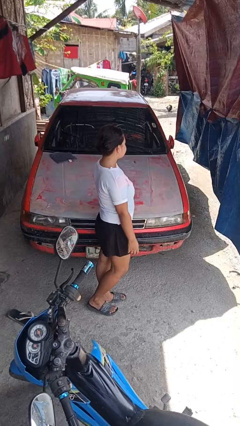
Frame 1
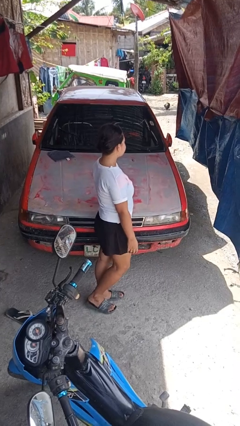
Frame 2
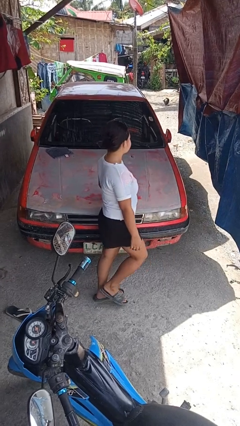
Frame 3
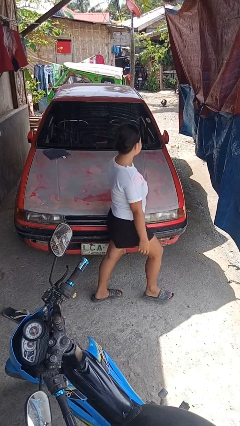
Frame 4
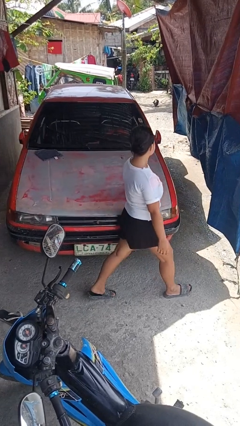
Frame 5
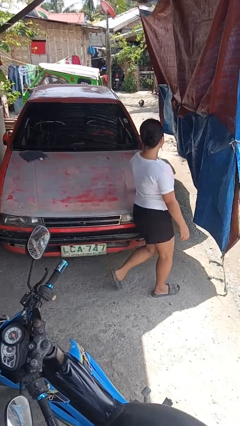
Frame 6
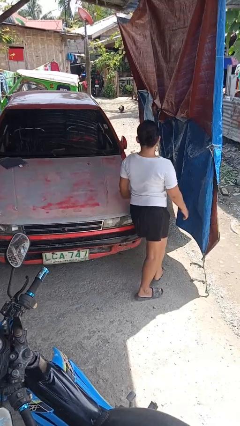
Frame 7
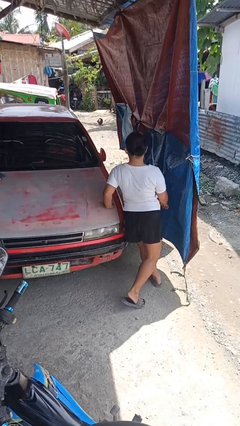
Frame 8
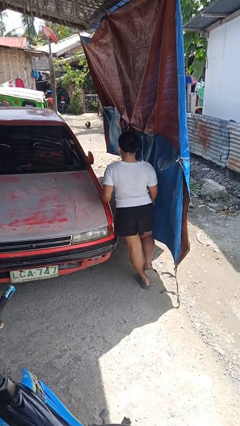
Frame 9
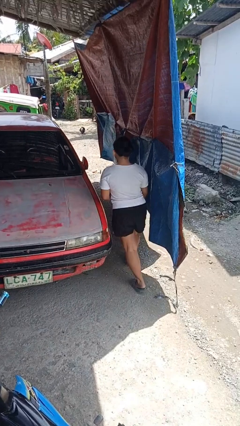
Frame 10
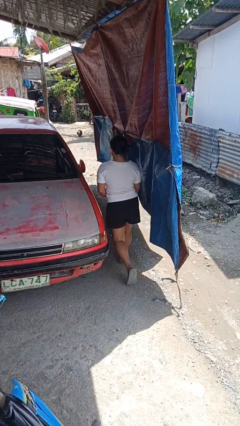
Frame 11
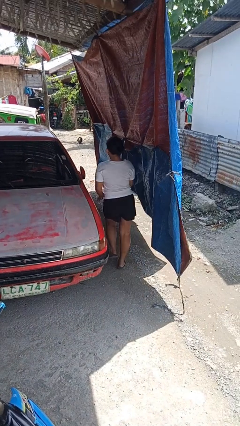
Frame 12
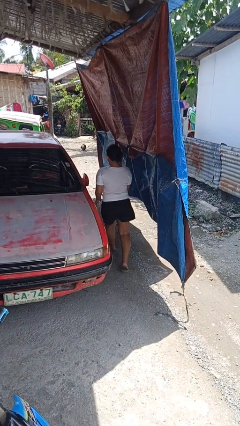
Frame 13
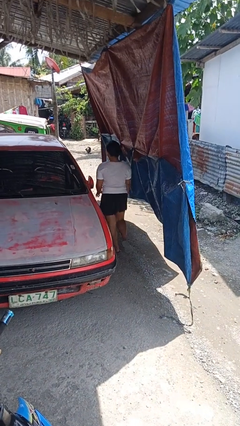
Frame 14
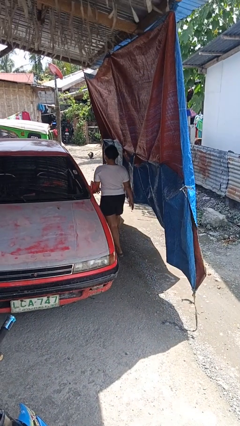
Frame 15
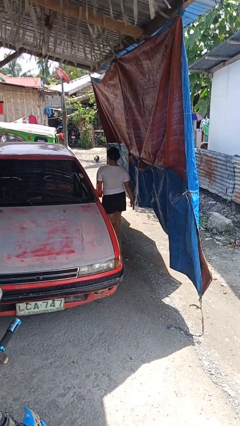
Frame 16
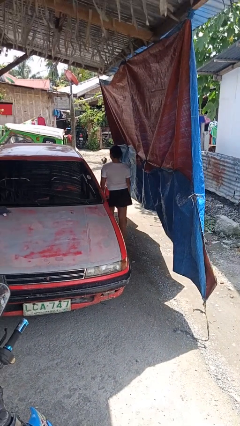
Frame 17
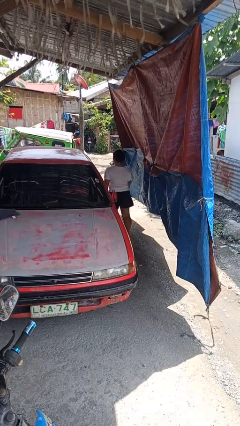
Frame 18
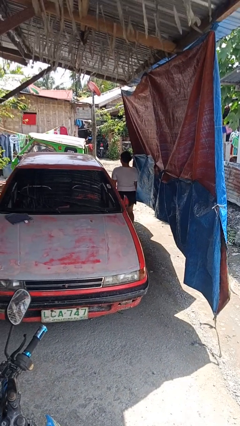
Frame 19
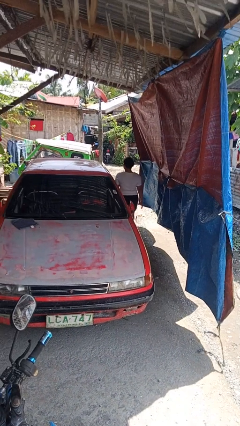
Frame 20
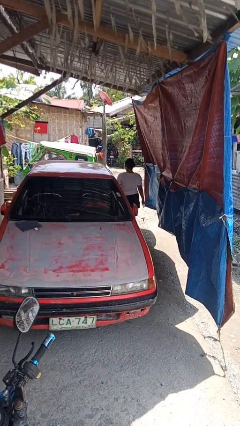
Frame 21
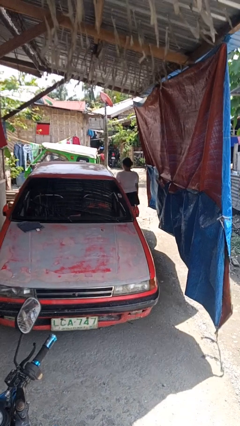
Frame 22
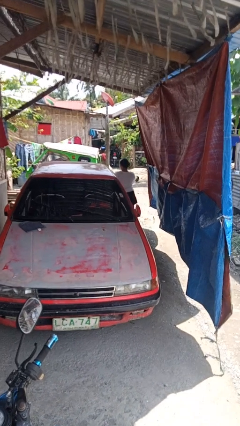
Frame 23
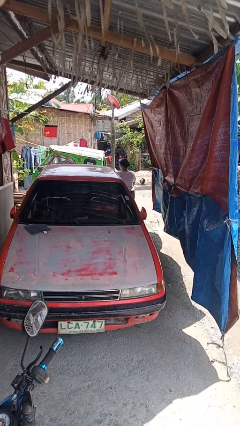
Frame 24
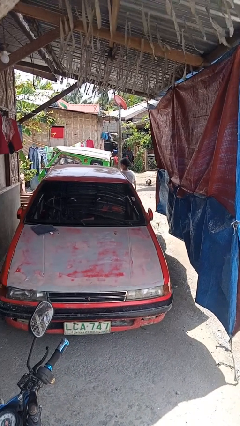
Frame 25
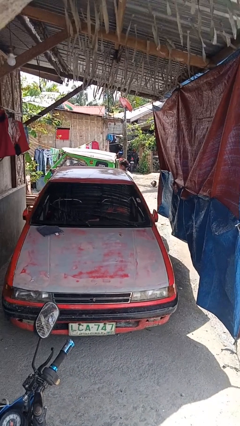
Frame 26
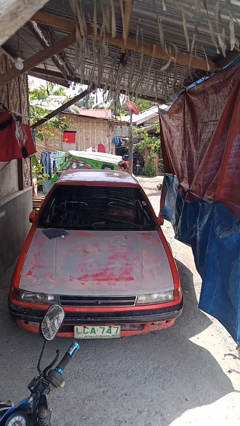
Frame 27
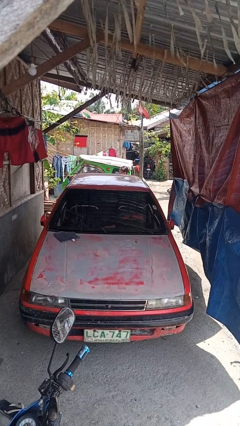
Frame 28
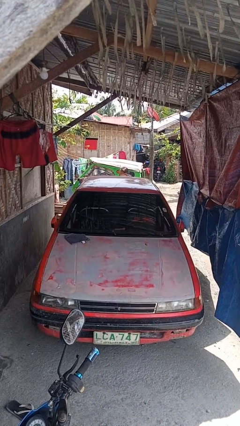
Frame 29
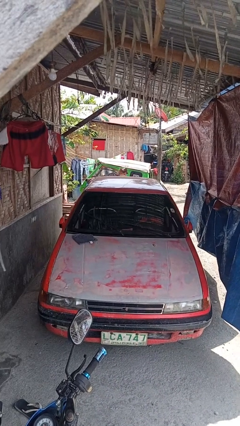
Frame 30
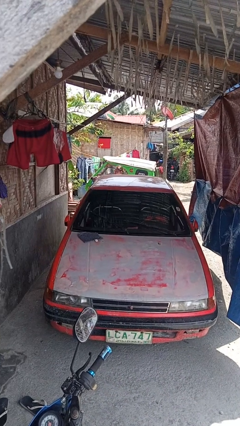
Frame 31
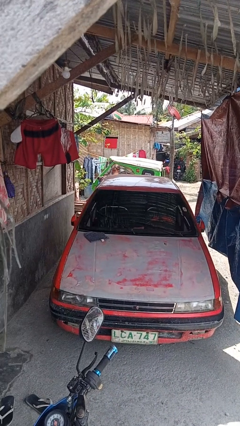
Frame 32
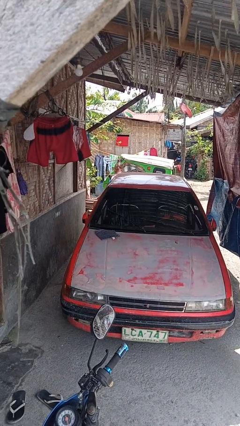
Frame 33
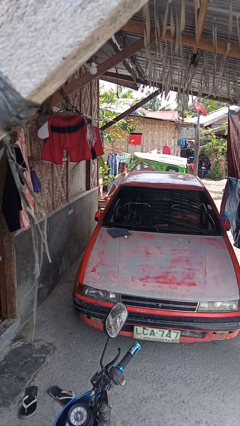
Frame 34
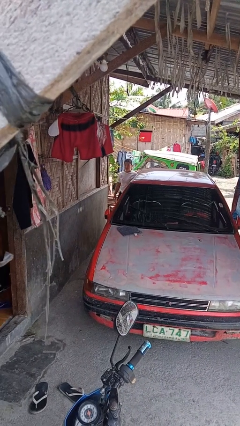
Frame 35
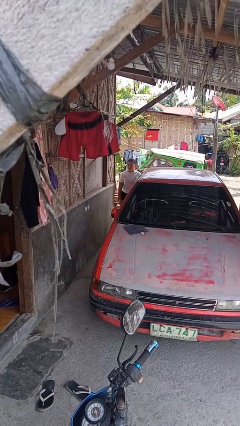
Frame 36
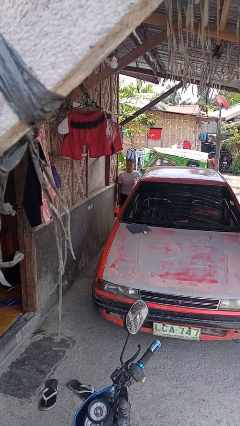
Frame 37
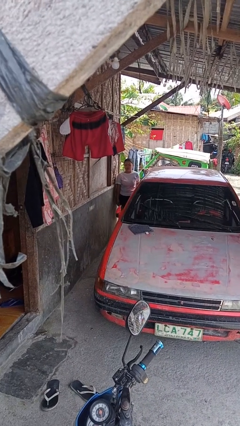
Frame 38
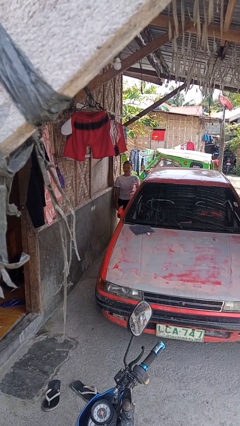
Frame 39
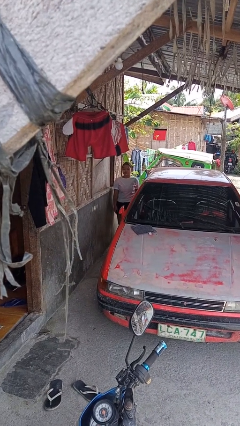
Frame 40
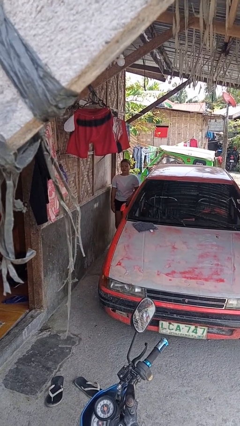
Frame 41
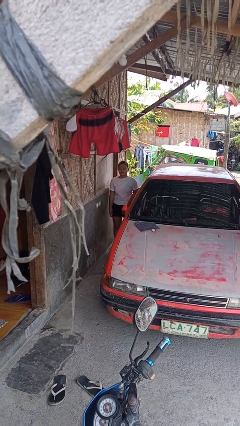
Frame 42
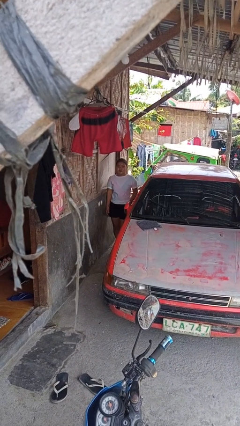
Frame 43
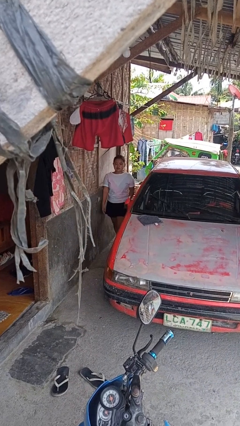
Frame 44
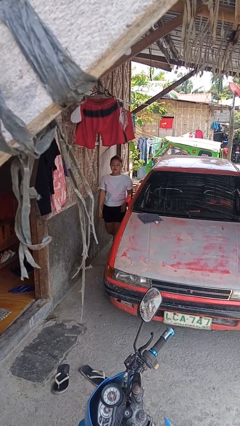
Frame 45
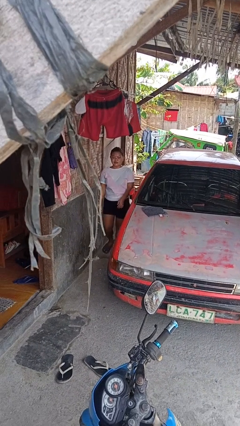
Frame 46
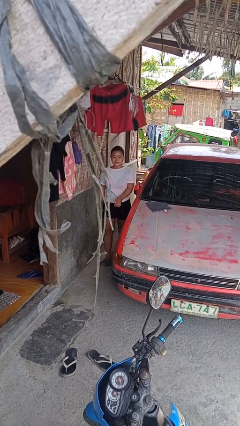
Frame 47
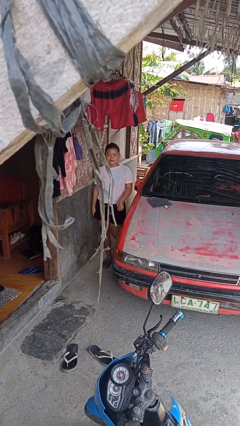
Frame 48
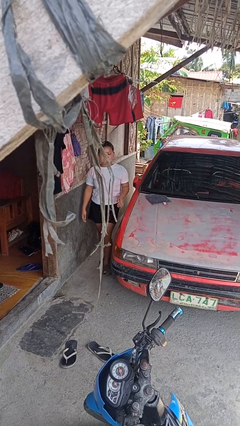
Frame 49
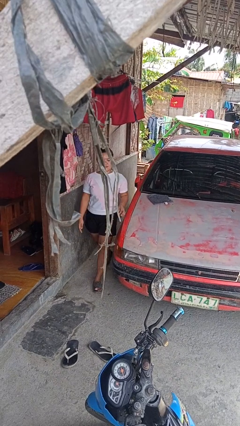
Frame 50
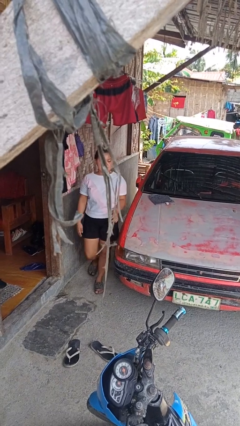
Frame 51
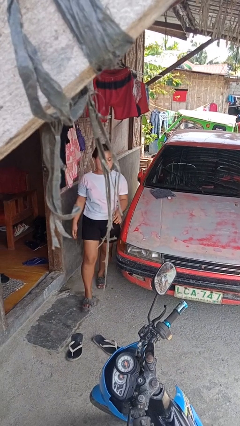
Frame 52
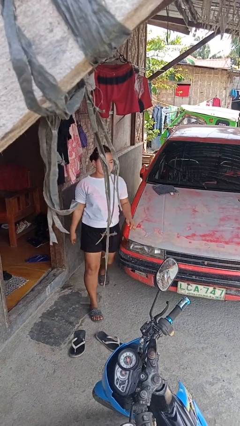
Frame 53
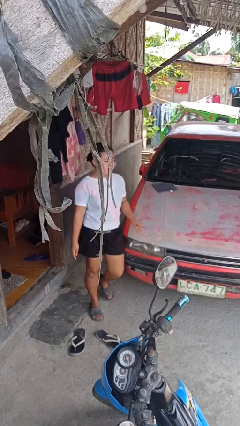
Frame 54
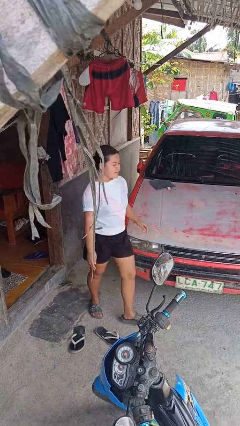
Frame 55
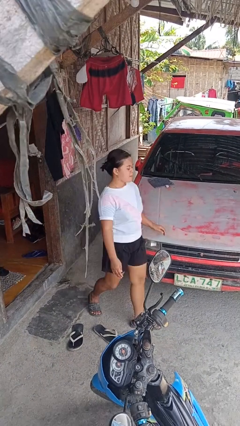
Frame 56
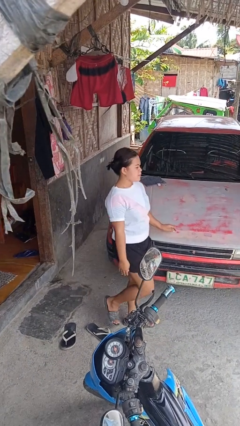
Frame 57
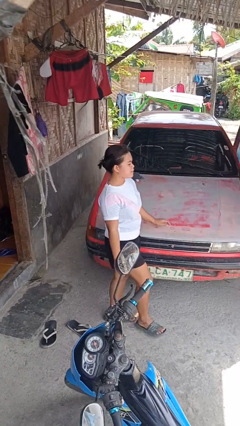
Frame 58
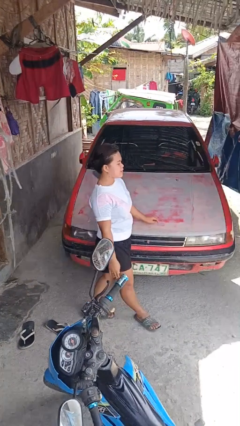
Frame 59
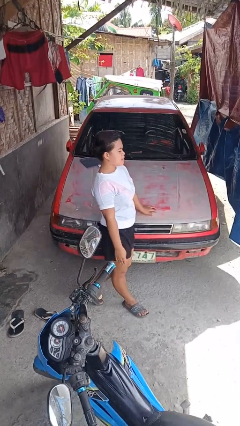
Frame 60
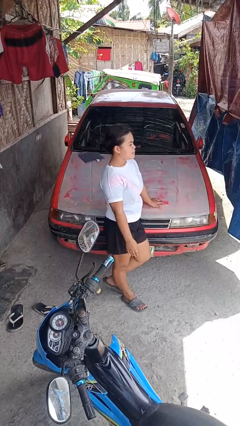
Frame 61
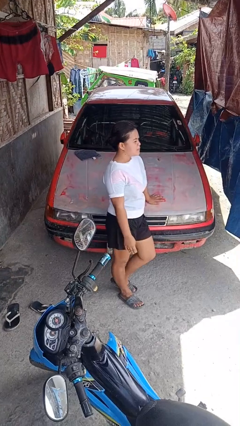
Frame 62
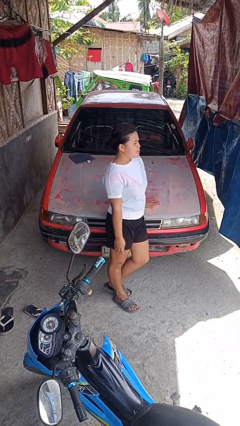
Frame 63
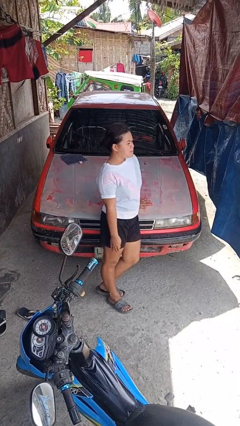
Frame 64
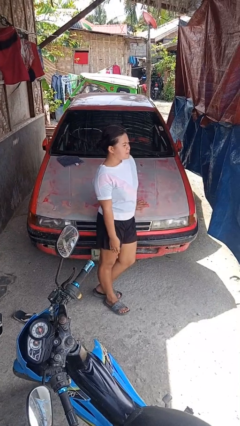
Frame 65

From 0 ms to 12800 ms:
person walks around car

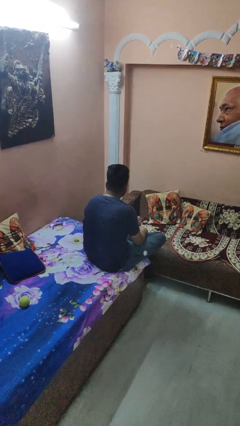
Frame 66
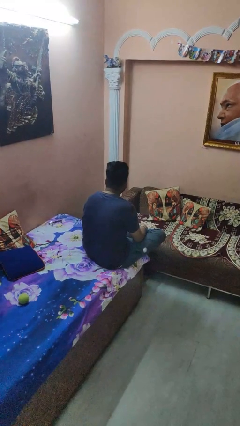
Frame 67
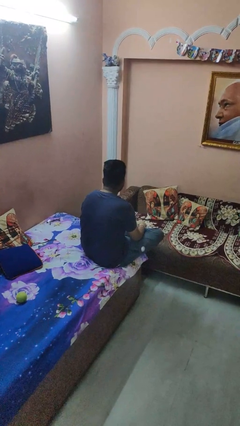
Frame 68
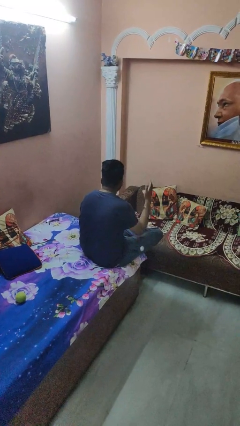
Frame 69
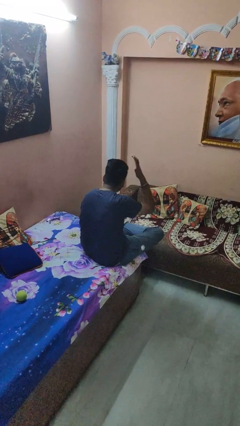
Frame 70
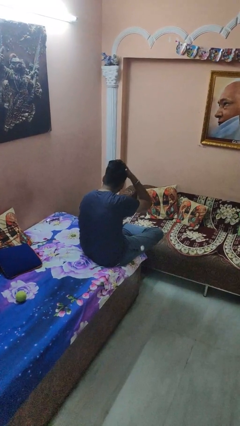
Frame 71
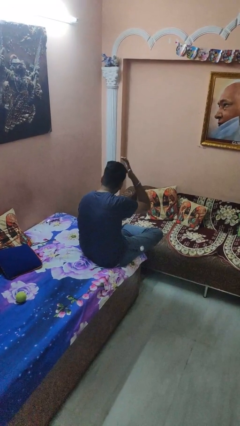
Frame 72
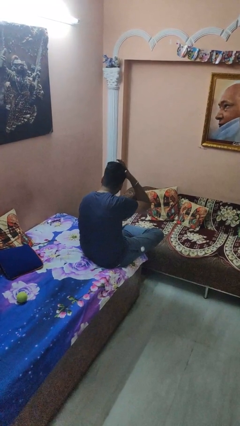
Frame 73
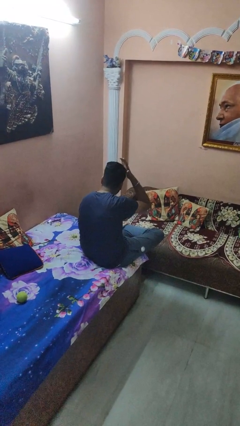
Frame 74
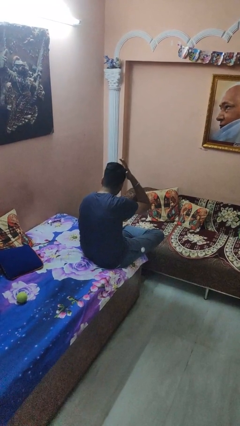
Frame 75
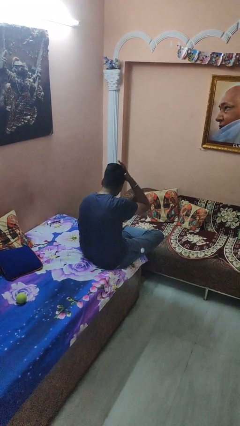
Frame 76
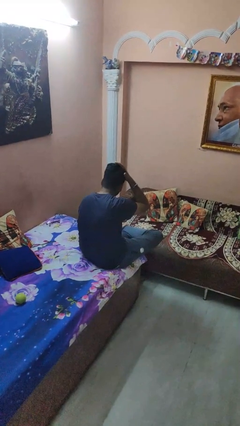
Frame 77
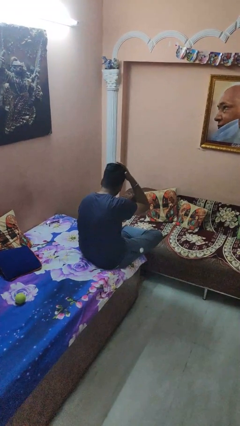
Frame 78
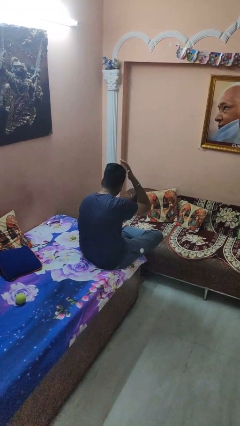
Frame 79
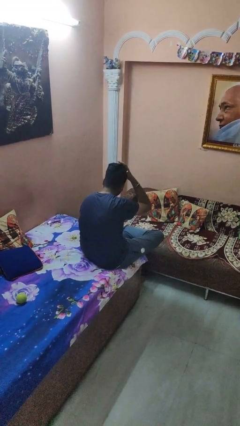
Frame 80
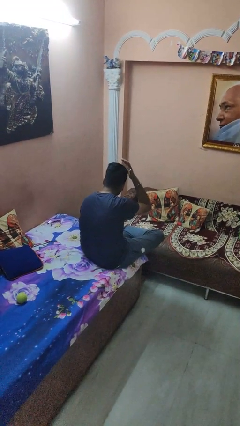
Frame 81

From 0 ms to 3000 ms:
person pats head

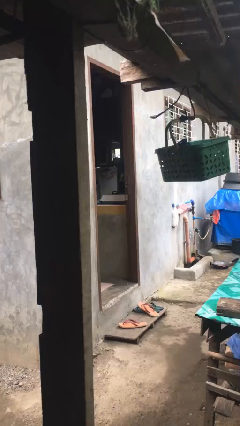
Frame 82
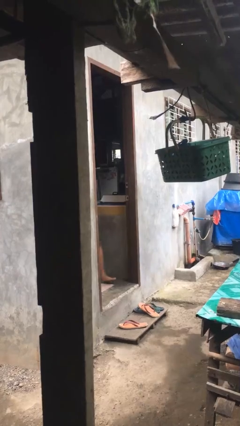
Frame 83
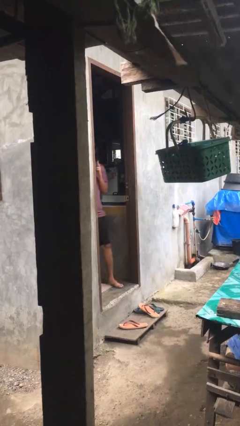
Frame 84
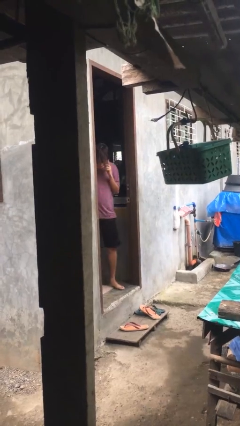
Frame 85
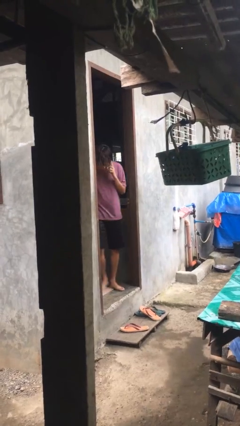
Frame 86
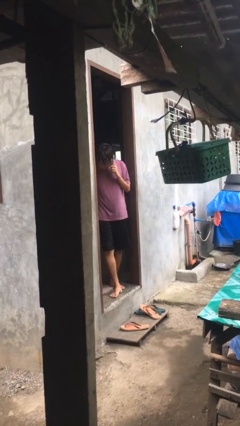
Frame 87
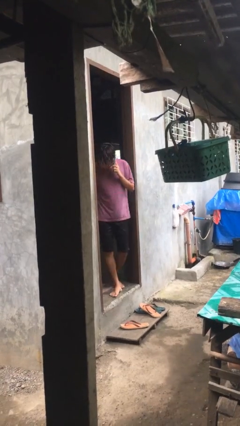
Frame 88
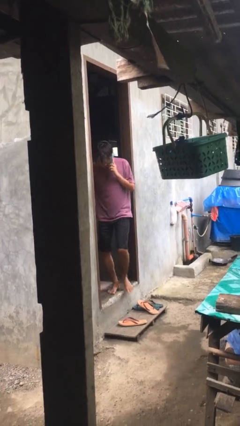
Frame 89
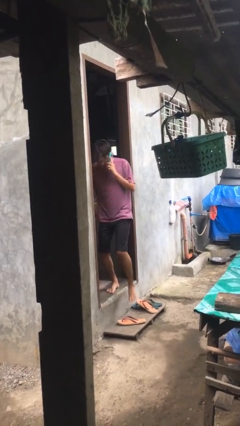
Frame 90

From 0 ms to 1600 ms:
person opens facility door

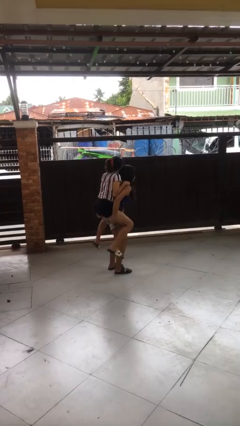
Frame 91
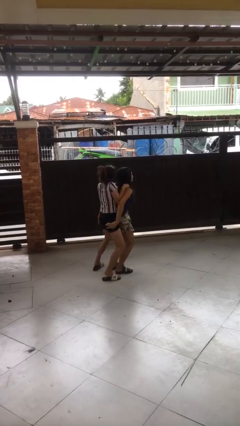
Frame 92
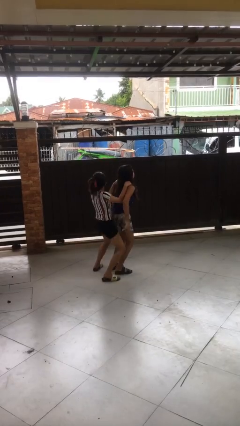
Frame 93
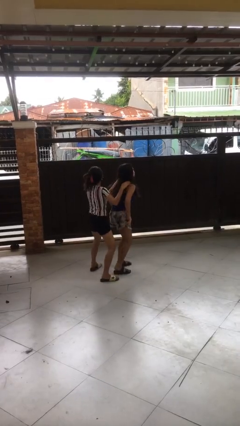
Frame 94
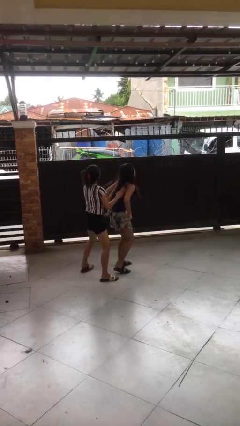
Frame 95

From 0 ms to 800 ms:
person puts down person
